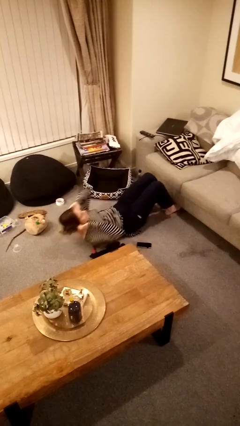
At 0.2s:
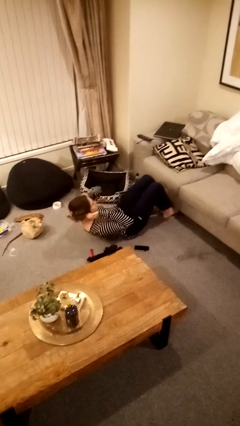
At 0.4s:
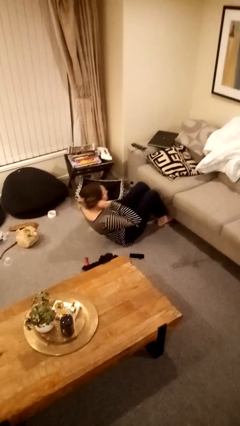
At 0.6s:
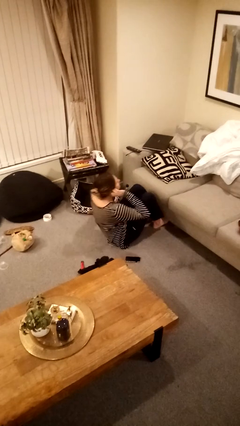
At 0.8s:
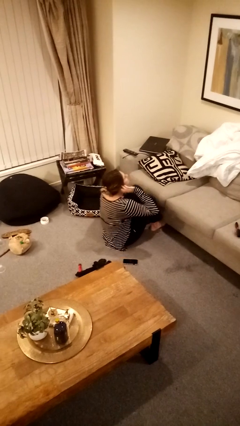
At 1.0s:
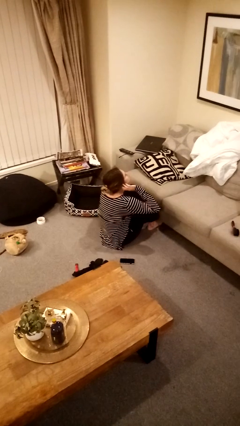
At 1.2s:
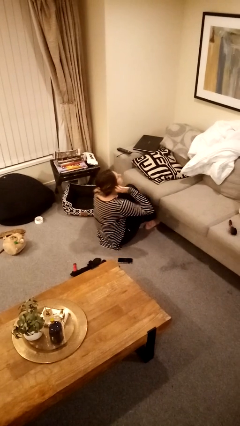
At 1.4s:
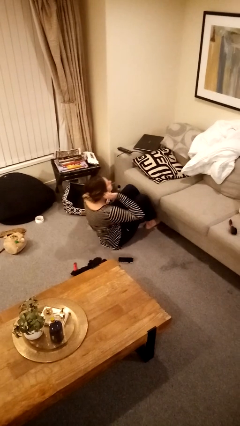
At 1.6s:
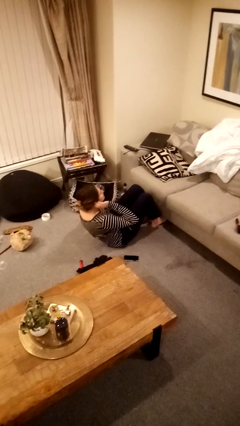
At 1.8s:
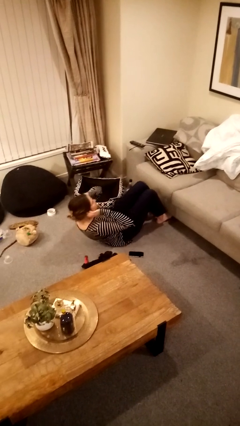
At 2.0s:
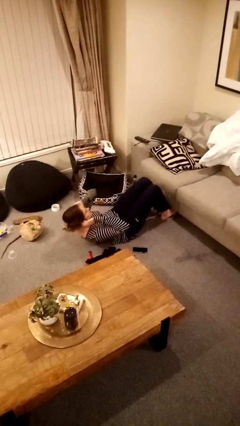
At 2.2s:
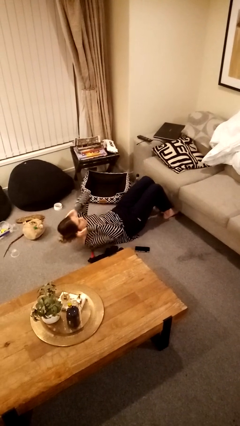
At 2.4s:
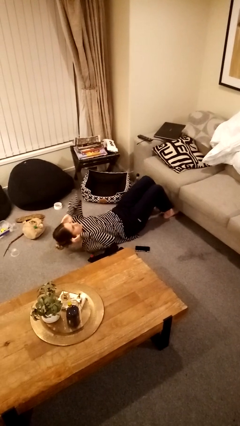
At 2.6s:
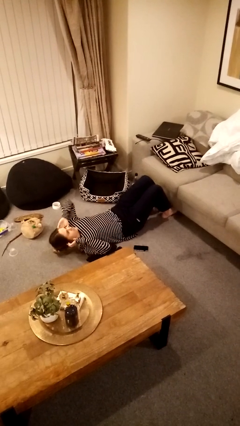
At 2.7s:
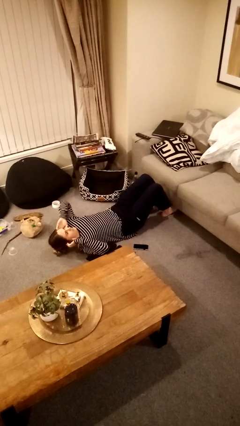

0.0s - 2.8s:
person exercises with situp

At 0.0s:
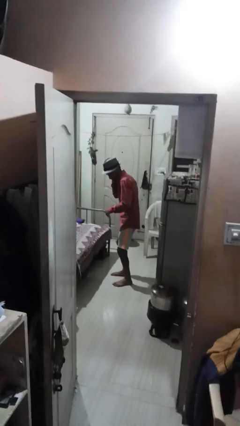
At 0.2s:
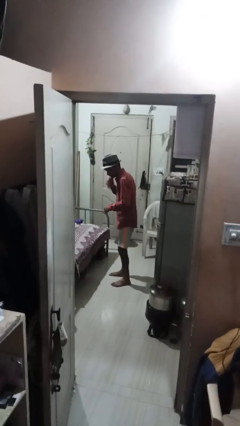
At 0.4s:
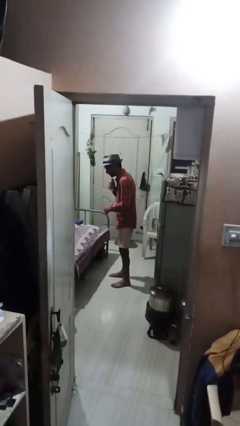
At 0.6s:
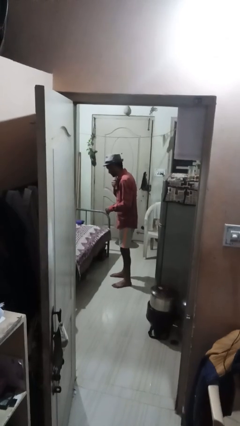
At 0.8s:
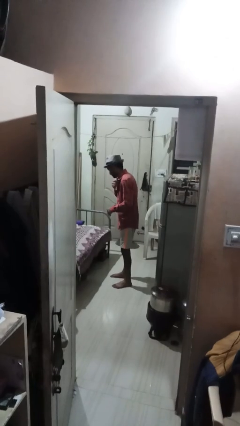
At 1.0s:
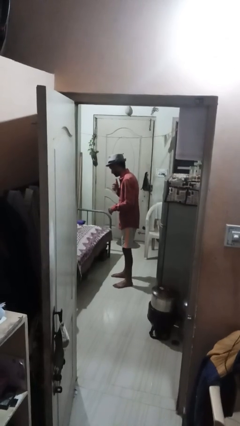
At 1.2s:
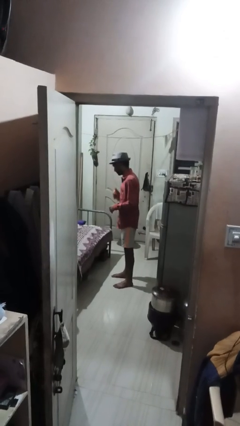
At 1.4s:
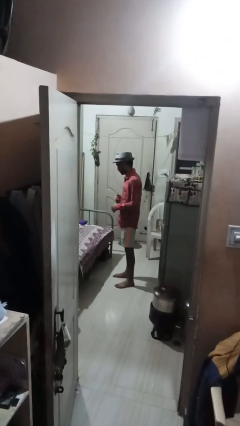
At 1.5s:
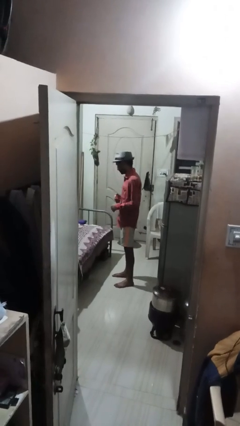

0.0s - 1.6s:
person applies deodorant

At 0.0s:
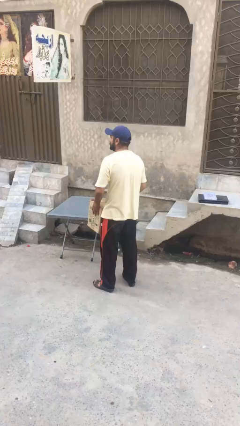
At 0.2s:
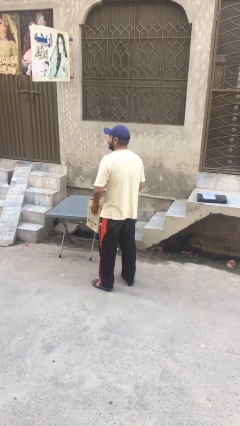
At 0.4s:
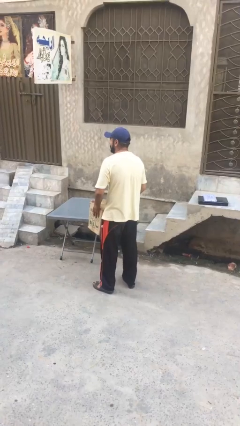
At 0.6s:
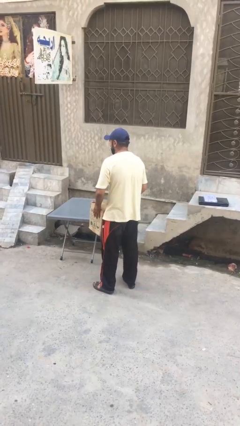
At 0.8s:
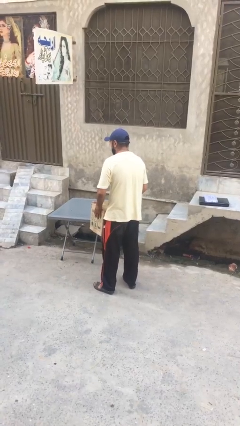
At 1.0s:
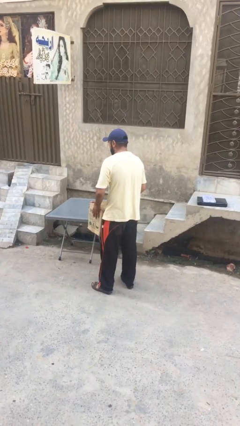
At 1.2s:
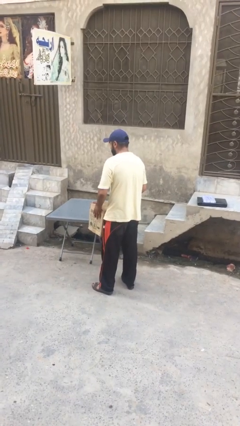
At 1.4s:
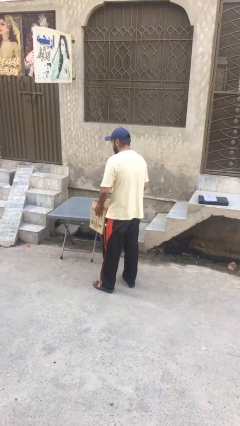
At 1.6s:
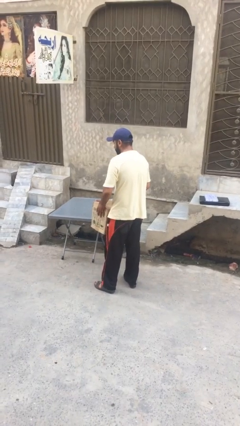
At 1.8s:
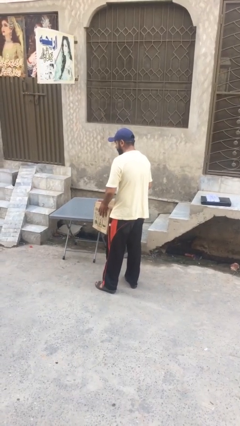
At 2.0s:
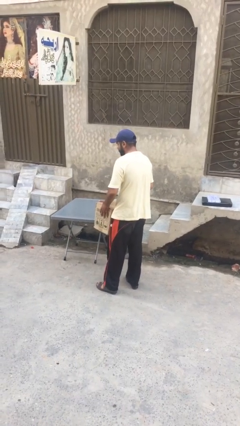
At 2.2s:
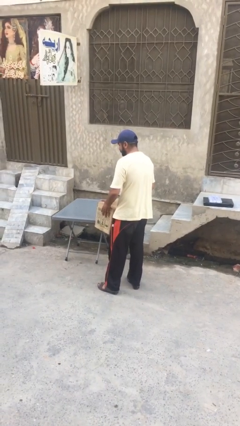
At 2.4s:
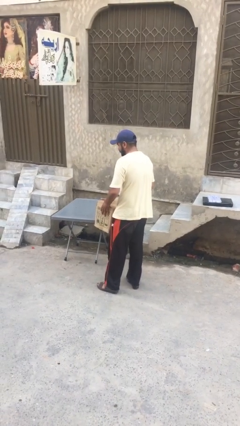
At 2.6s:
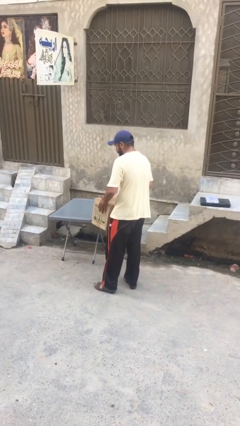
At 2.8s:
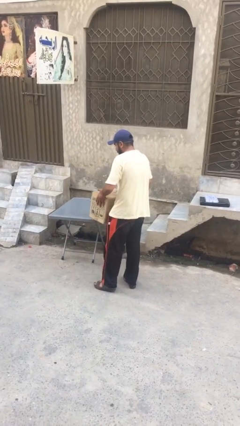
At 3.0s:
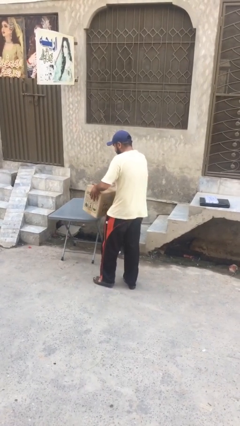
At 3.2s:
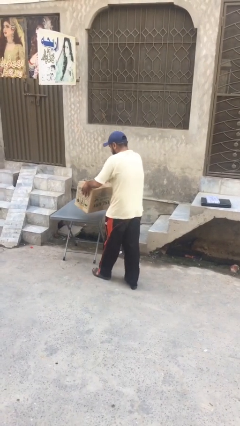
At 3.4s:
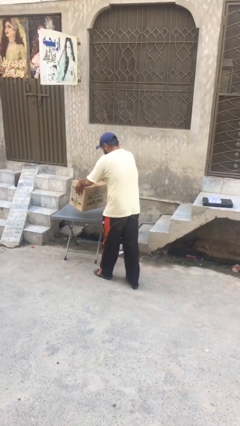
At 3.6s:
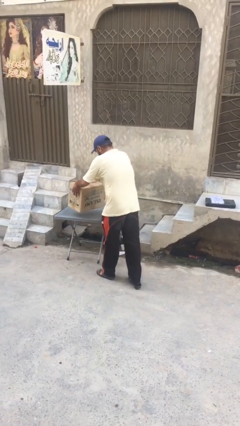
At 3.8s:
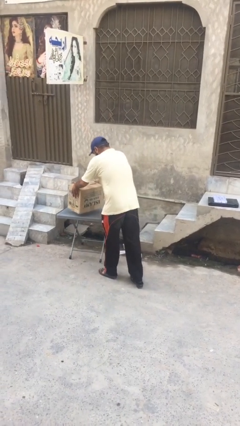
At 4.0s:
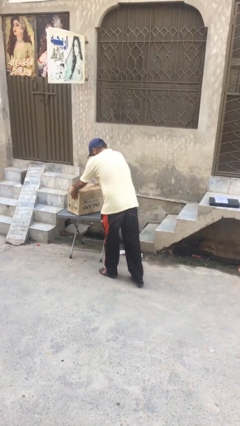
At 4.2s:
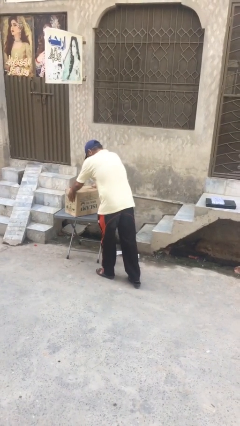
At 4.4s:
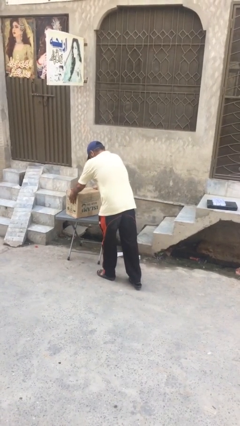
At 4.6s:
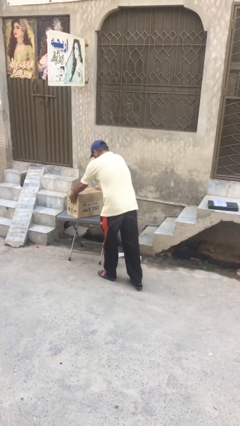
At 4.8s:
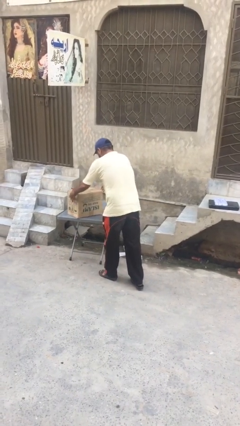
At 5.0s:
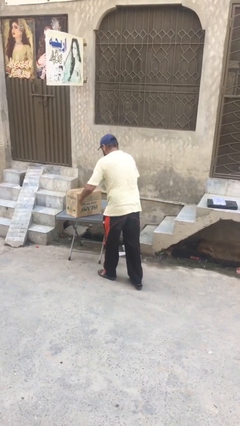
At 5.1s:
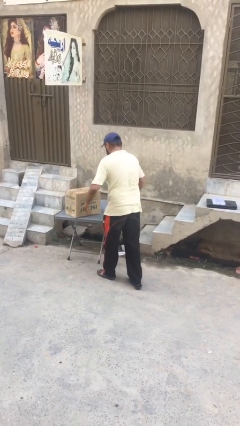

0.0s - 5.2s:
person puts down object on table

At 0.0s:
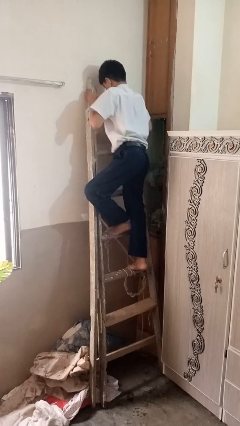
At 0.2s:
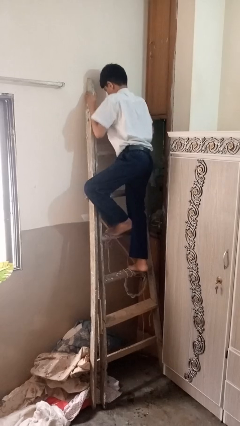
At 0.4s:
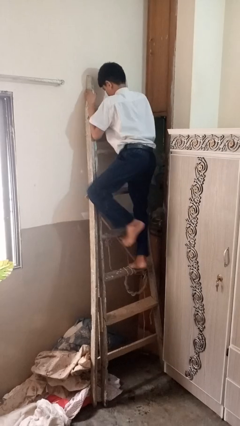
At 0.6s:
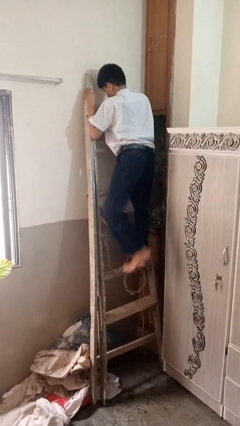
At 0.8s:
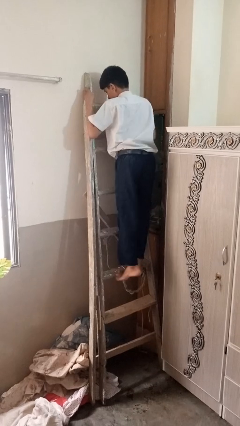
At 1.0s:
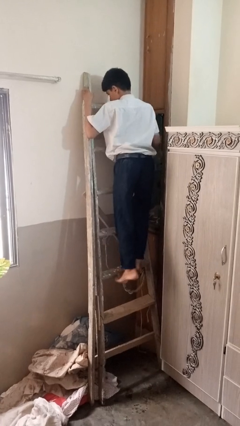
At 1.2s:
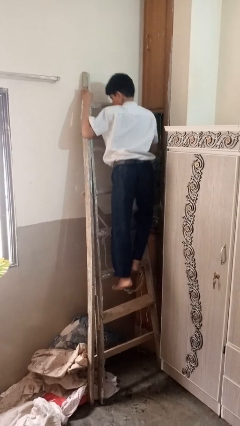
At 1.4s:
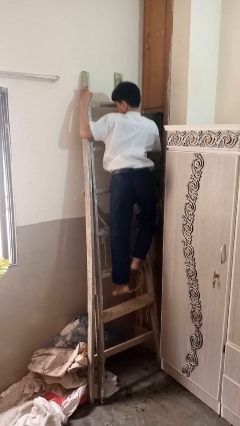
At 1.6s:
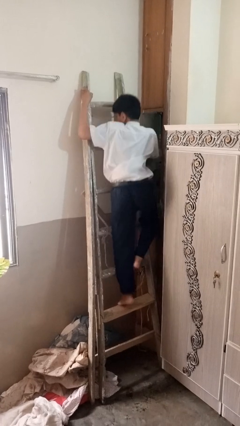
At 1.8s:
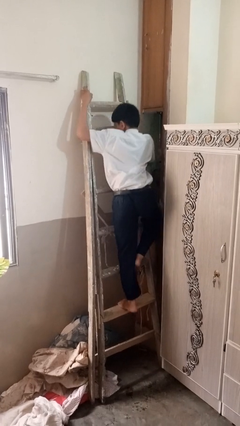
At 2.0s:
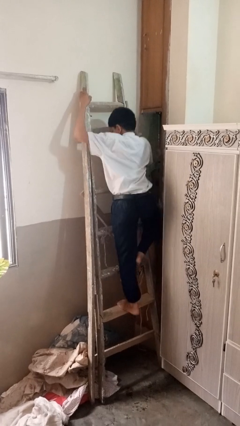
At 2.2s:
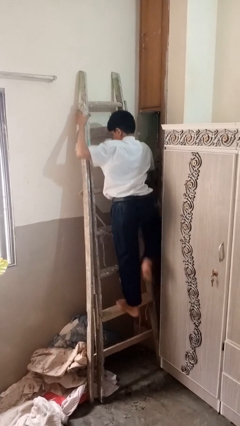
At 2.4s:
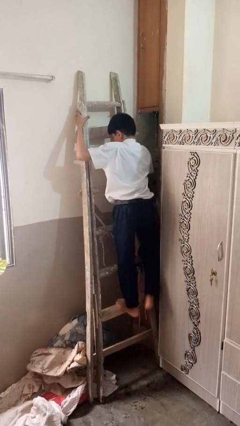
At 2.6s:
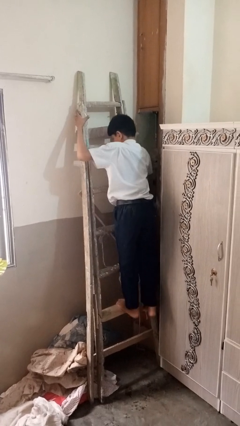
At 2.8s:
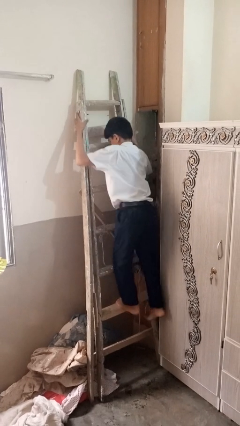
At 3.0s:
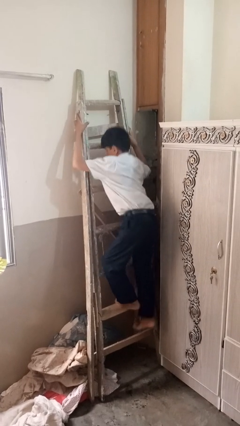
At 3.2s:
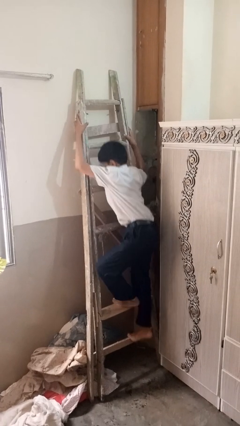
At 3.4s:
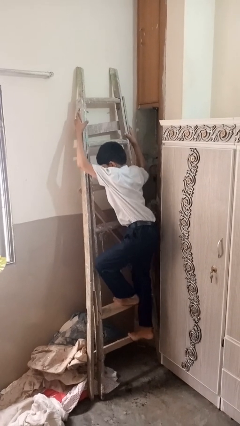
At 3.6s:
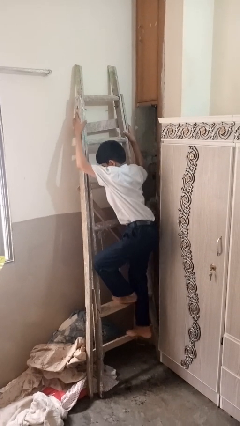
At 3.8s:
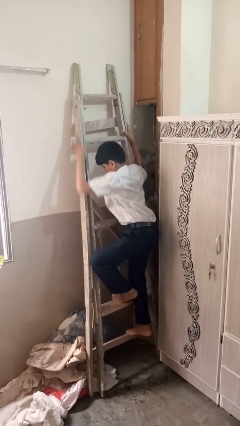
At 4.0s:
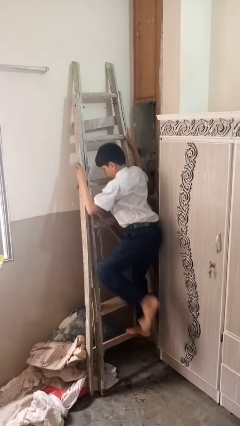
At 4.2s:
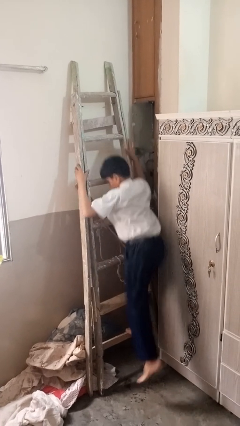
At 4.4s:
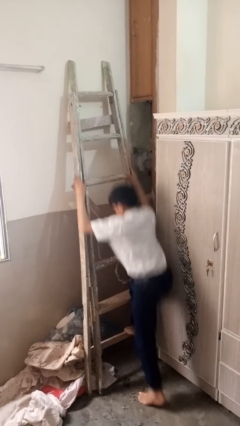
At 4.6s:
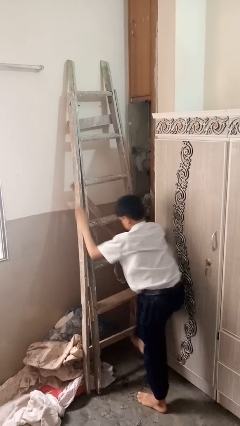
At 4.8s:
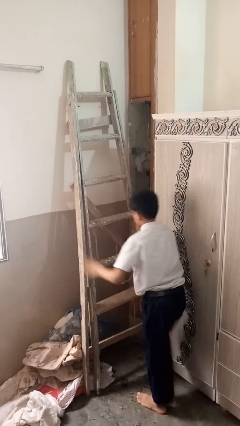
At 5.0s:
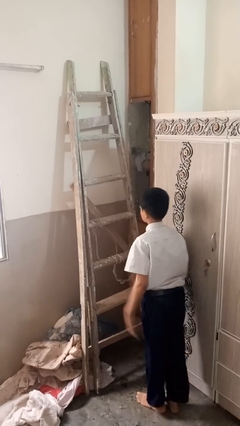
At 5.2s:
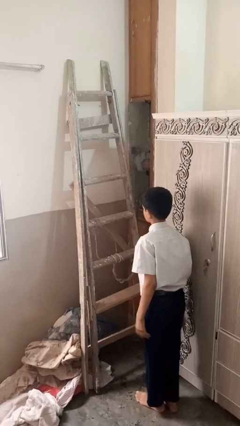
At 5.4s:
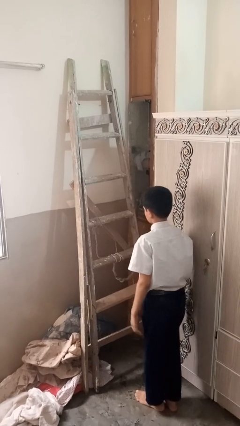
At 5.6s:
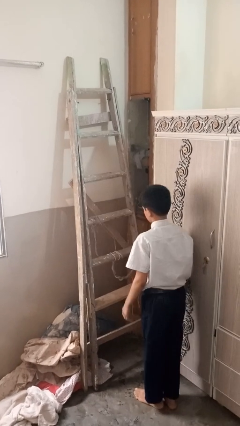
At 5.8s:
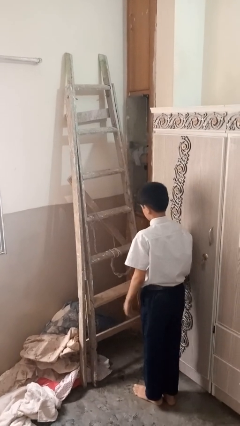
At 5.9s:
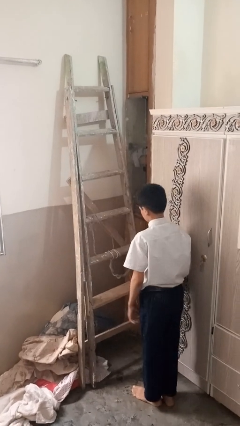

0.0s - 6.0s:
person climbs down ladder

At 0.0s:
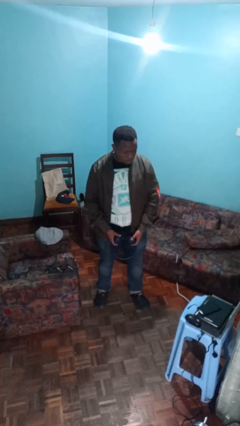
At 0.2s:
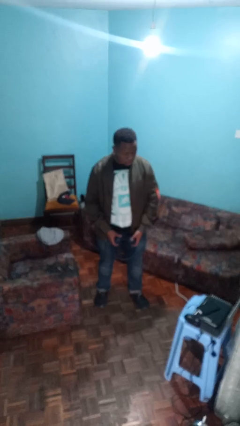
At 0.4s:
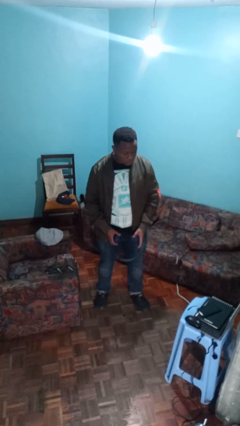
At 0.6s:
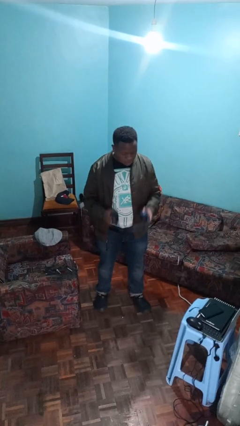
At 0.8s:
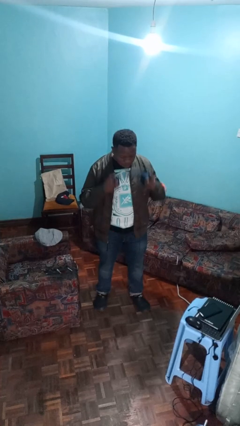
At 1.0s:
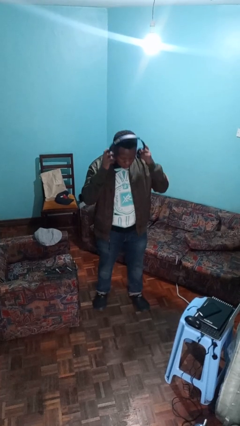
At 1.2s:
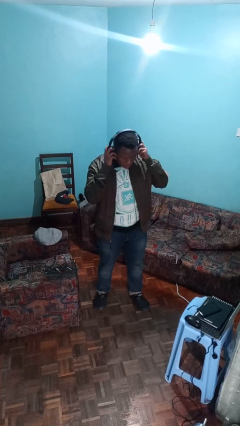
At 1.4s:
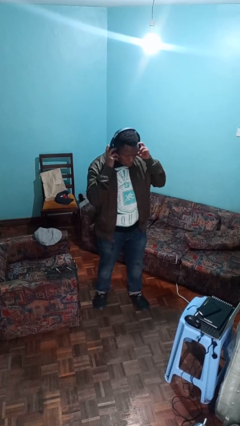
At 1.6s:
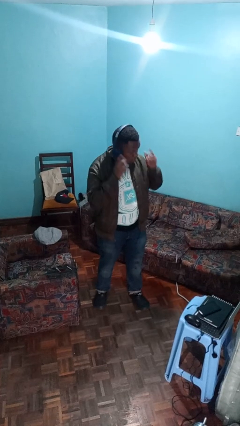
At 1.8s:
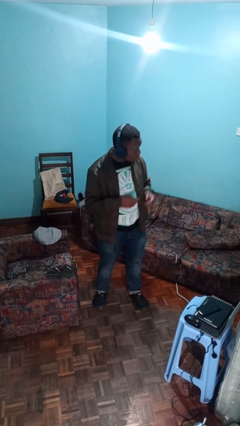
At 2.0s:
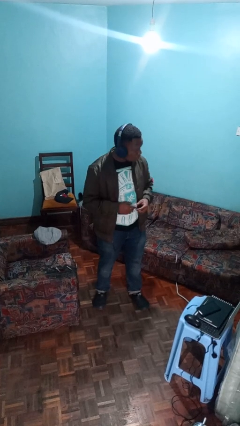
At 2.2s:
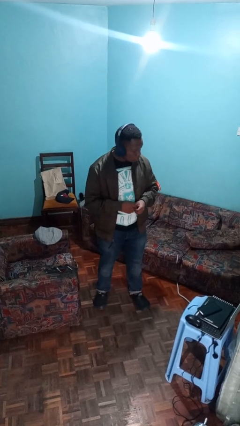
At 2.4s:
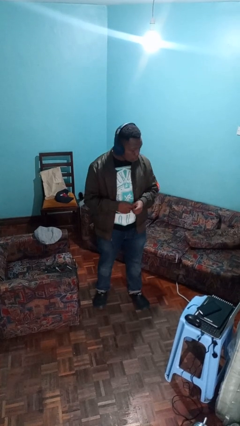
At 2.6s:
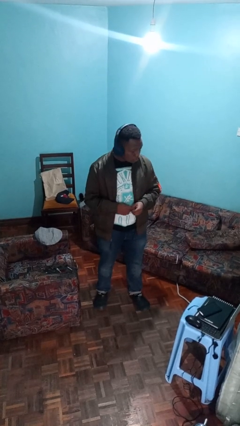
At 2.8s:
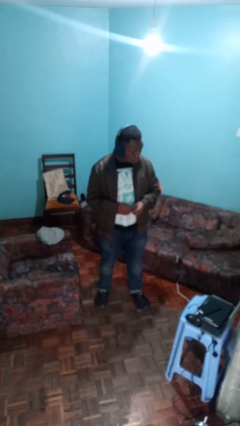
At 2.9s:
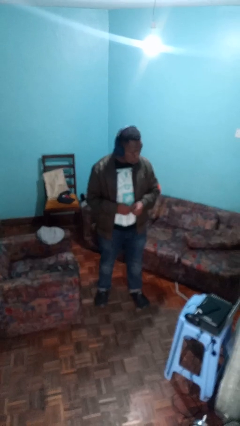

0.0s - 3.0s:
person puts on headphones
